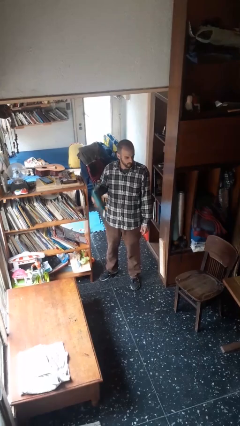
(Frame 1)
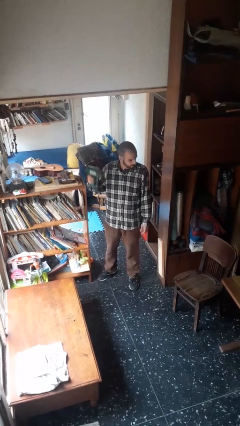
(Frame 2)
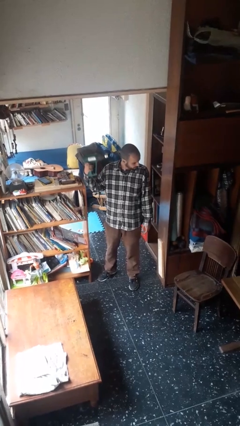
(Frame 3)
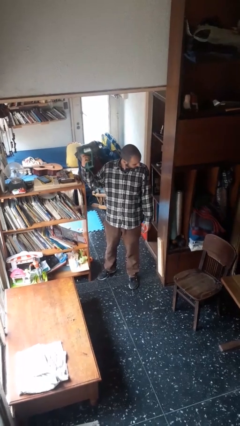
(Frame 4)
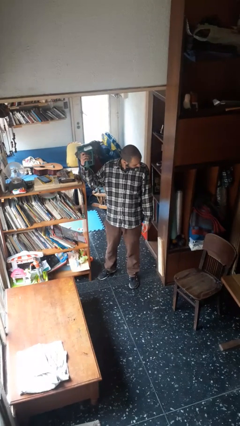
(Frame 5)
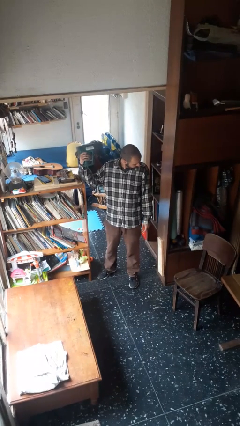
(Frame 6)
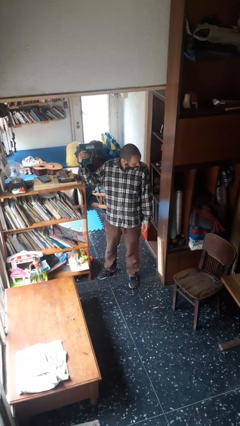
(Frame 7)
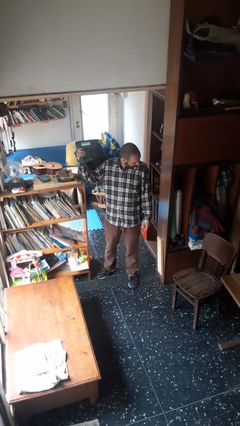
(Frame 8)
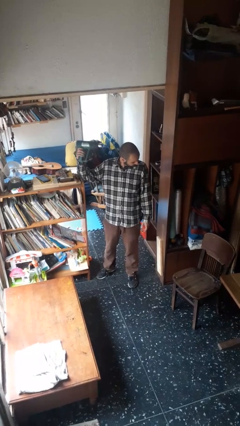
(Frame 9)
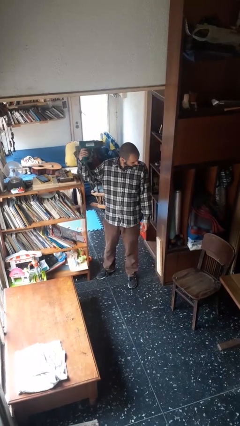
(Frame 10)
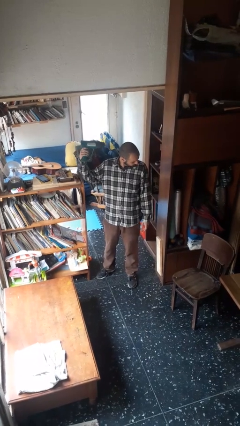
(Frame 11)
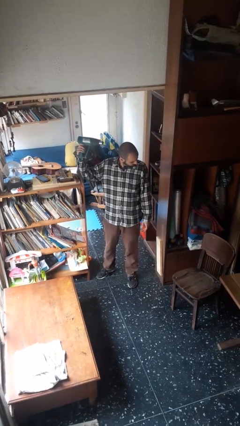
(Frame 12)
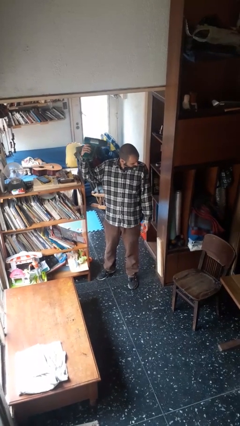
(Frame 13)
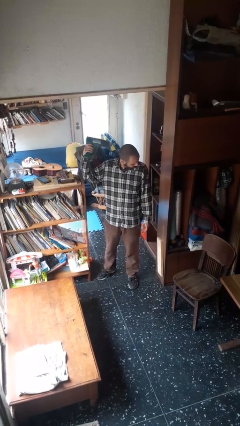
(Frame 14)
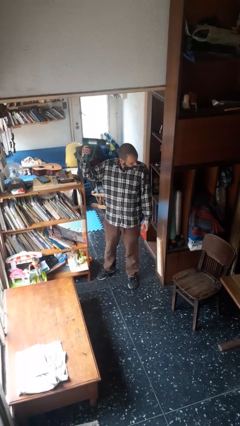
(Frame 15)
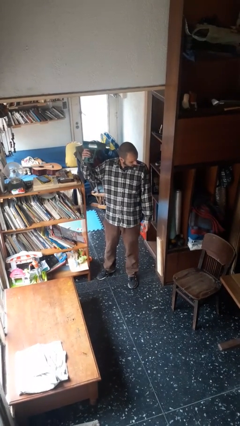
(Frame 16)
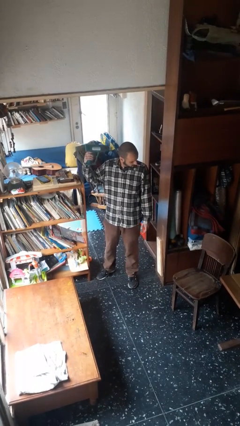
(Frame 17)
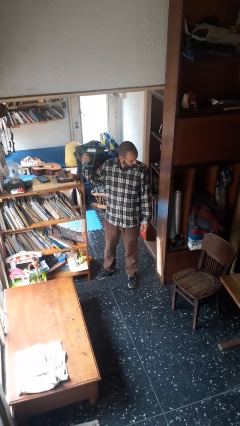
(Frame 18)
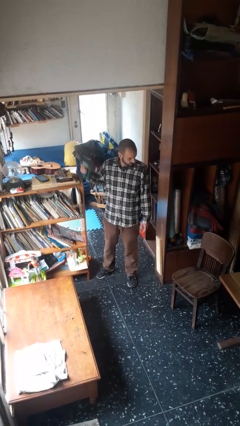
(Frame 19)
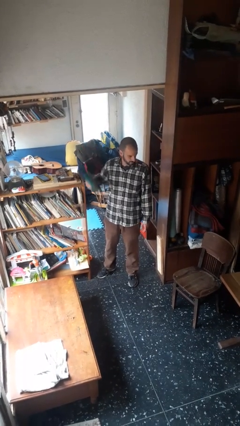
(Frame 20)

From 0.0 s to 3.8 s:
person dries hair with hairdryer

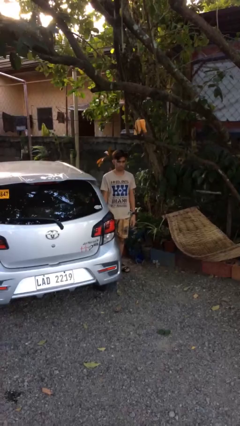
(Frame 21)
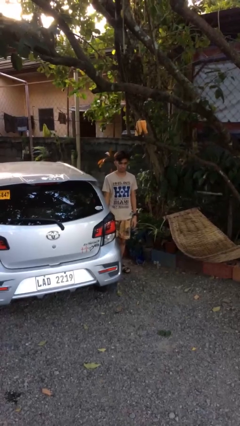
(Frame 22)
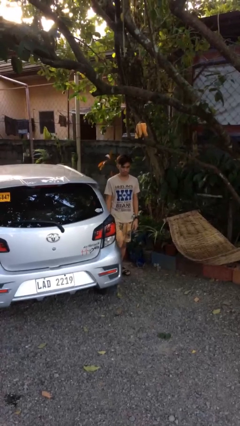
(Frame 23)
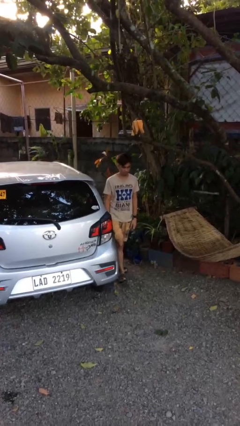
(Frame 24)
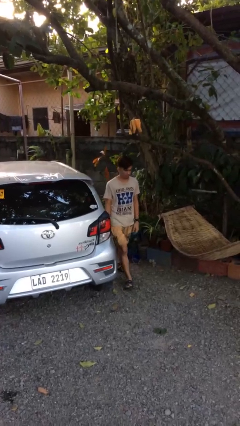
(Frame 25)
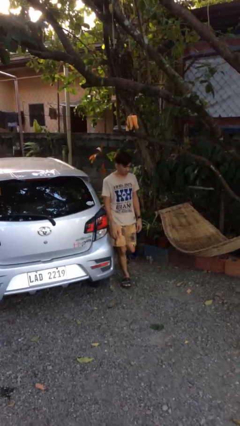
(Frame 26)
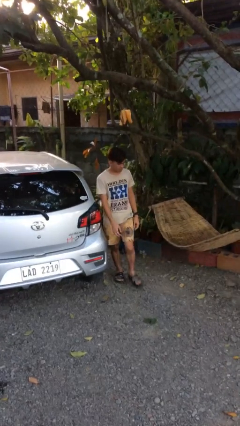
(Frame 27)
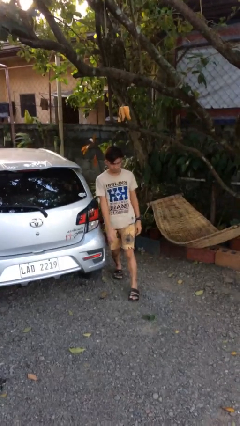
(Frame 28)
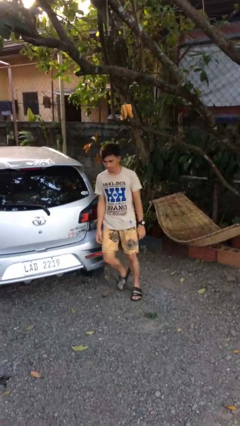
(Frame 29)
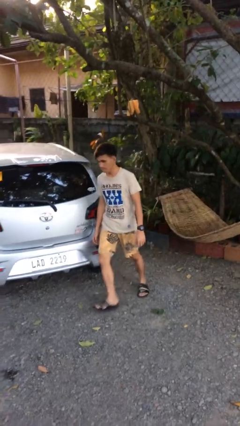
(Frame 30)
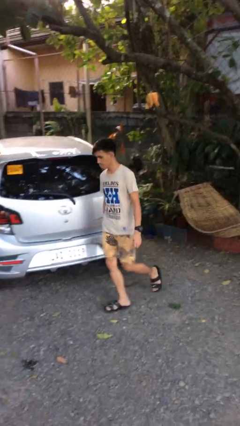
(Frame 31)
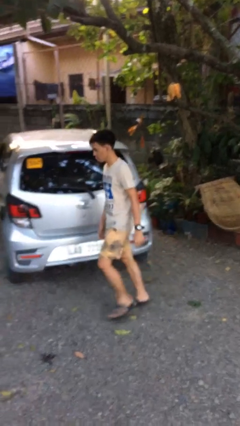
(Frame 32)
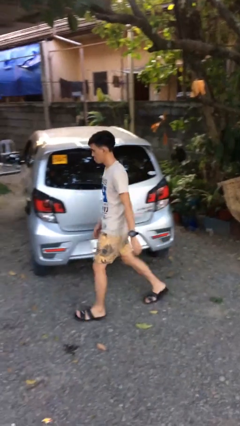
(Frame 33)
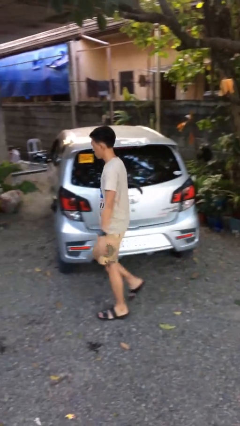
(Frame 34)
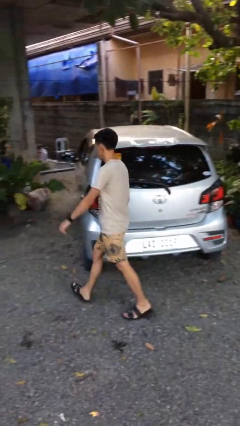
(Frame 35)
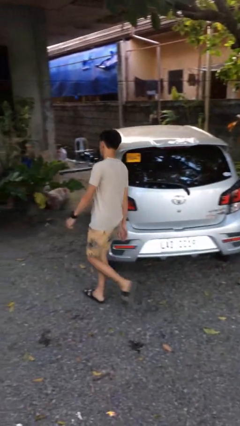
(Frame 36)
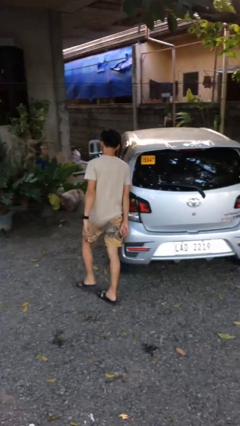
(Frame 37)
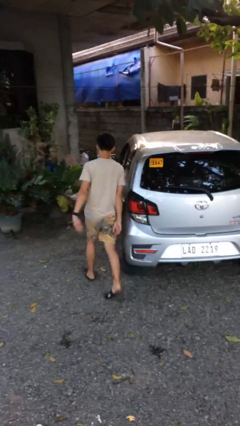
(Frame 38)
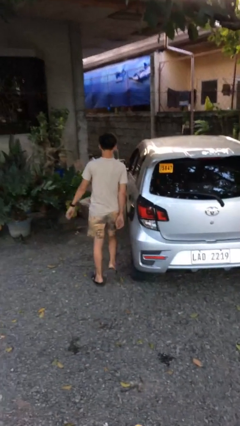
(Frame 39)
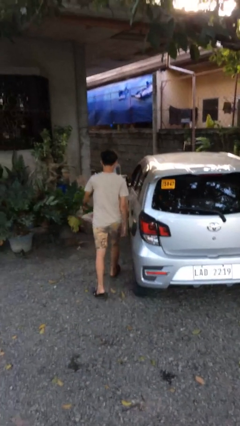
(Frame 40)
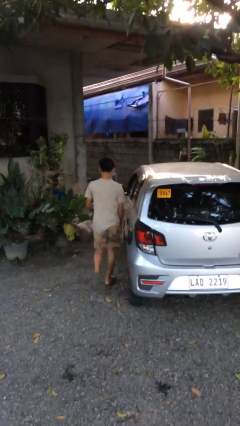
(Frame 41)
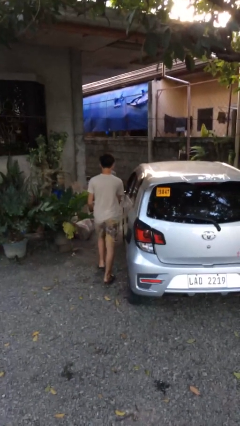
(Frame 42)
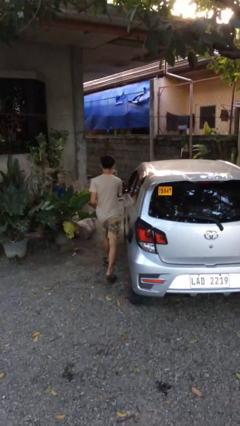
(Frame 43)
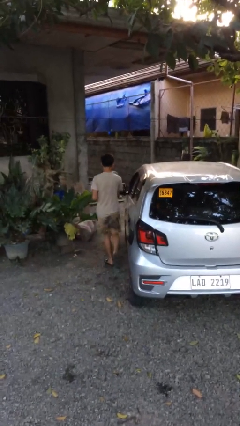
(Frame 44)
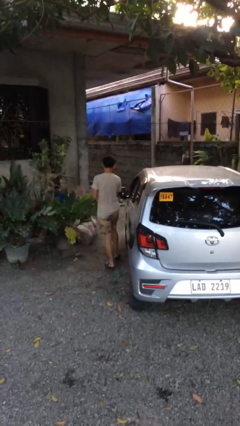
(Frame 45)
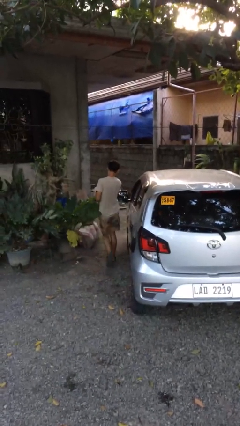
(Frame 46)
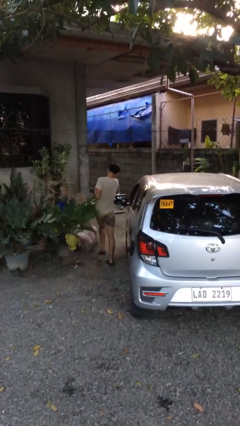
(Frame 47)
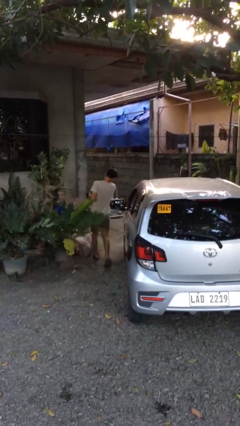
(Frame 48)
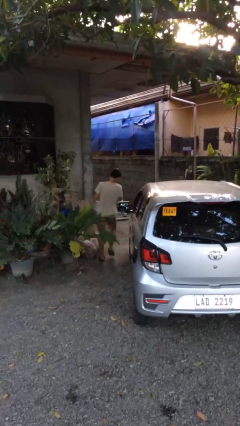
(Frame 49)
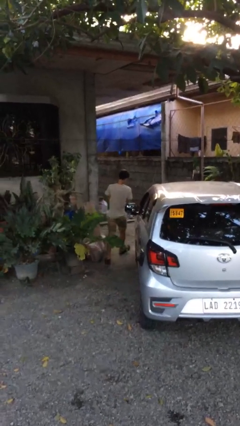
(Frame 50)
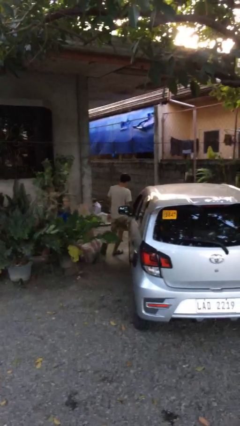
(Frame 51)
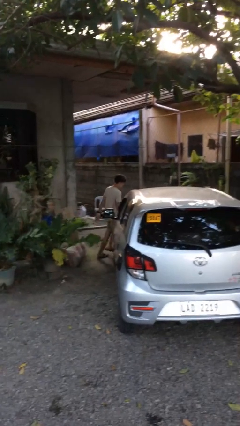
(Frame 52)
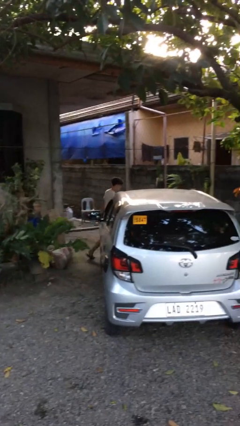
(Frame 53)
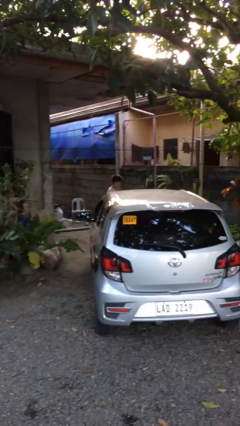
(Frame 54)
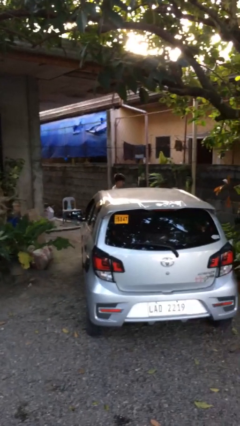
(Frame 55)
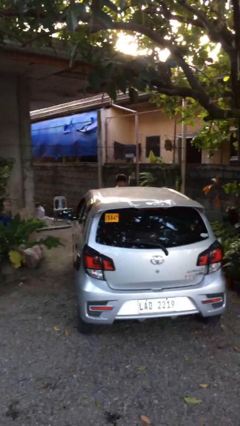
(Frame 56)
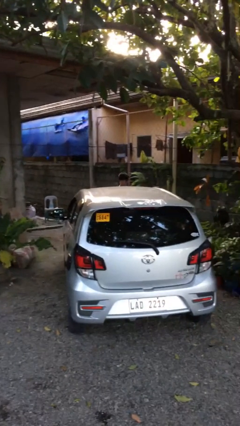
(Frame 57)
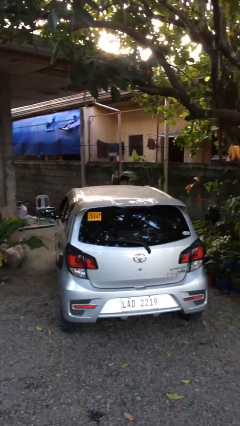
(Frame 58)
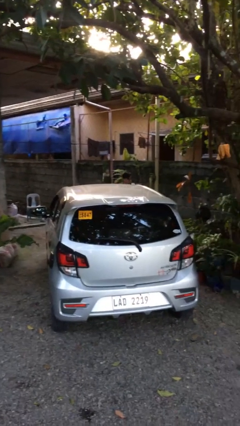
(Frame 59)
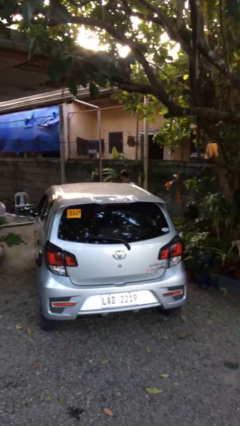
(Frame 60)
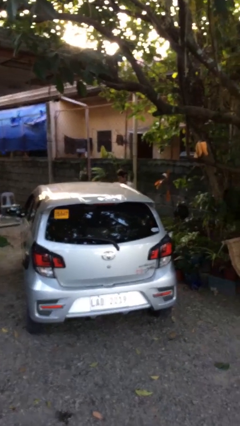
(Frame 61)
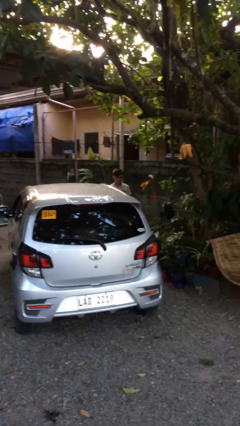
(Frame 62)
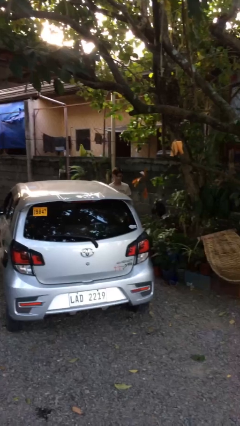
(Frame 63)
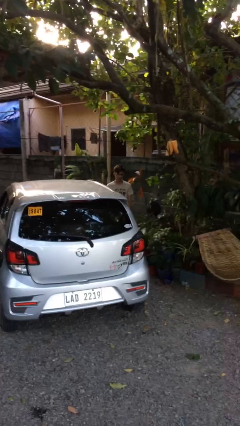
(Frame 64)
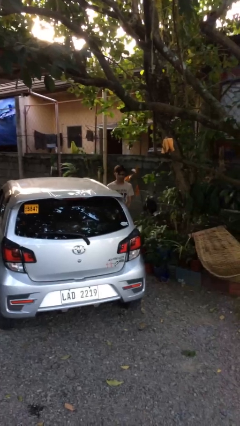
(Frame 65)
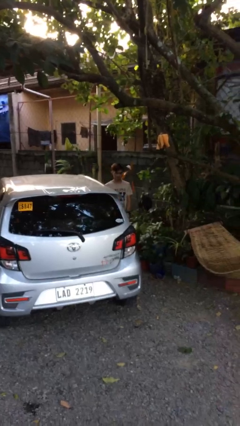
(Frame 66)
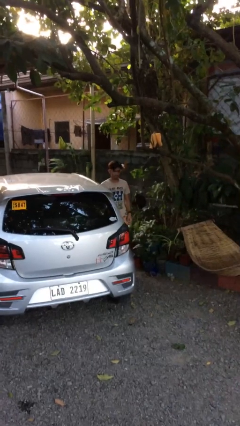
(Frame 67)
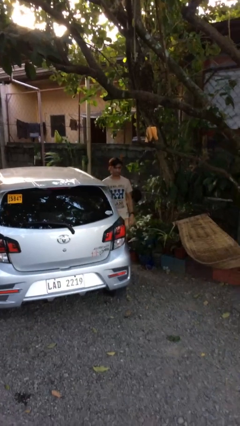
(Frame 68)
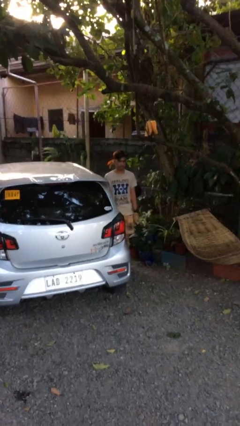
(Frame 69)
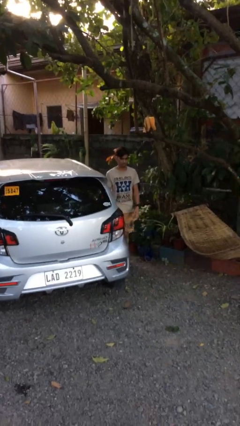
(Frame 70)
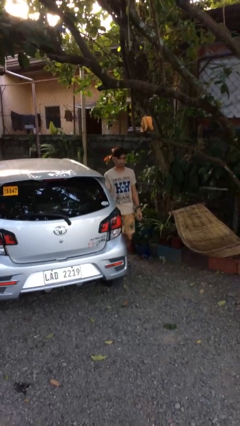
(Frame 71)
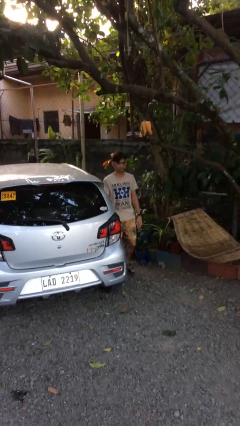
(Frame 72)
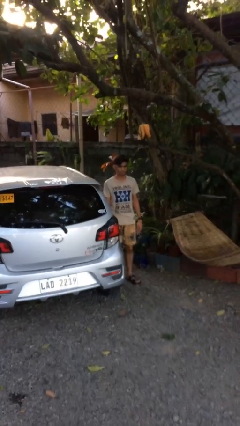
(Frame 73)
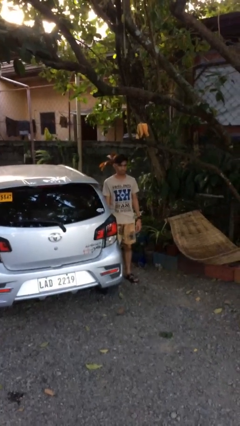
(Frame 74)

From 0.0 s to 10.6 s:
person walks around car

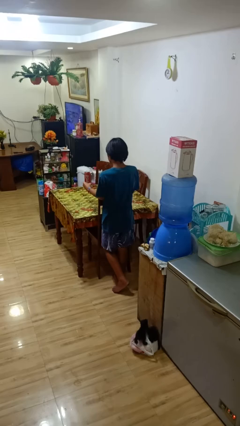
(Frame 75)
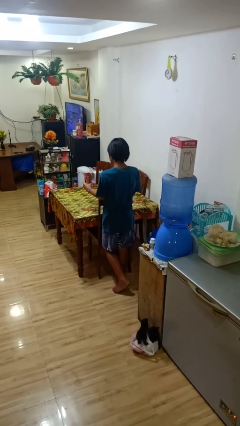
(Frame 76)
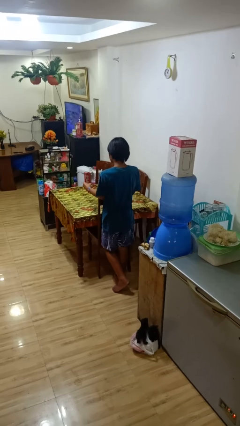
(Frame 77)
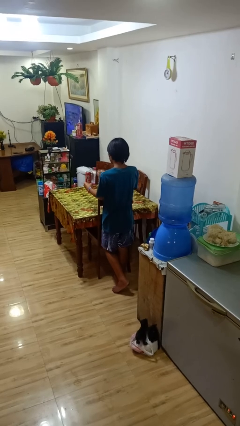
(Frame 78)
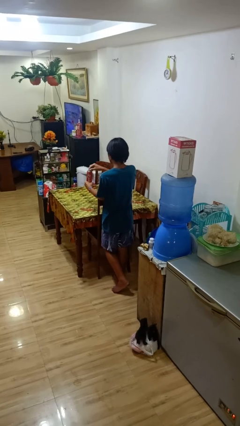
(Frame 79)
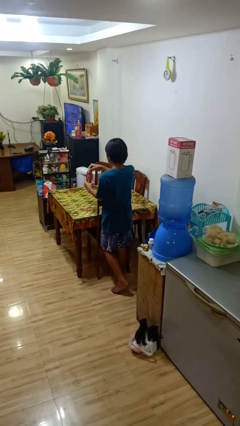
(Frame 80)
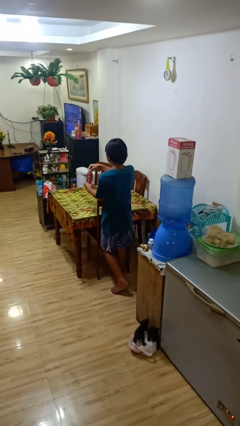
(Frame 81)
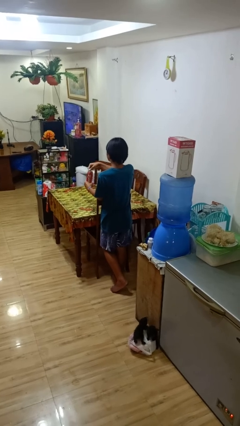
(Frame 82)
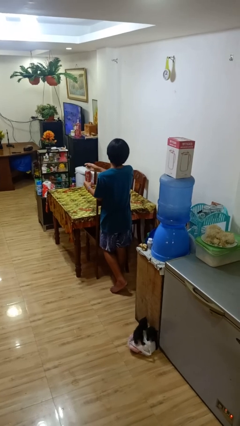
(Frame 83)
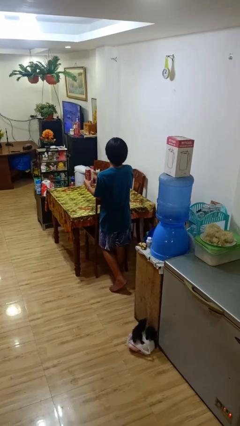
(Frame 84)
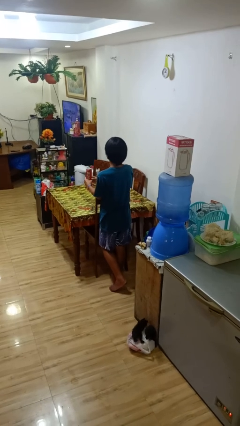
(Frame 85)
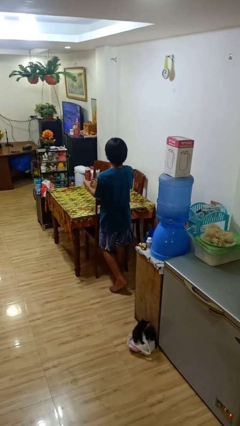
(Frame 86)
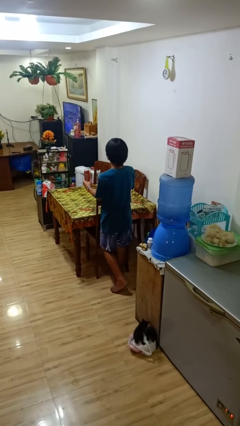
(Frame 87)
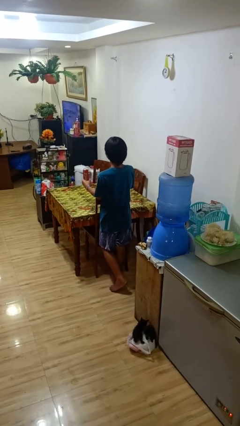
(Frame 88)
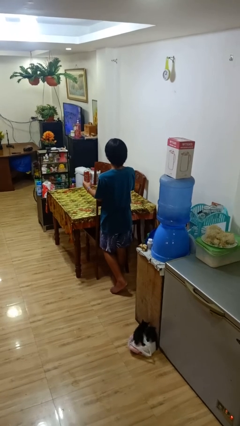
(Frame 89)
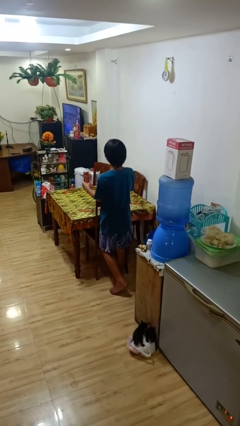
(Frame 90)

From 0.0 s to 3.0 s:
person opens beverage can

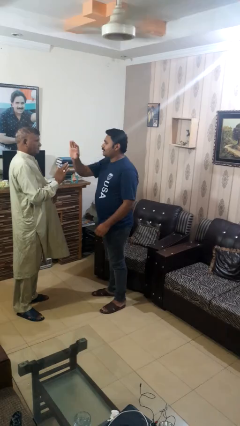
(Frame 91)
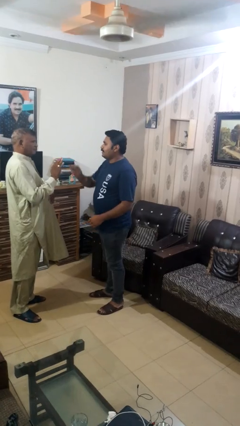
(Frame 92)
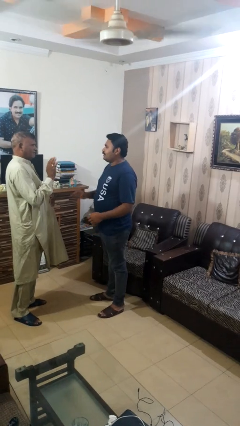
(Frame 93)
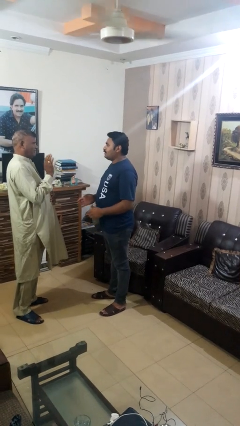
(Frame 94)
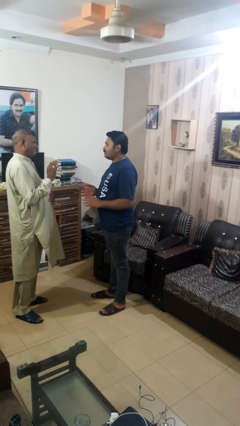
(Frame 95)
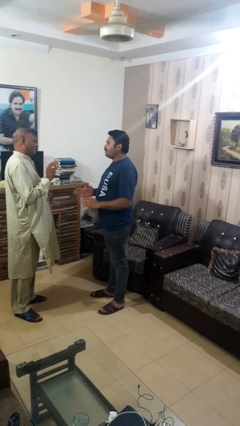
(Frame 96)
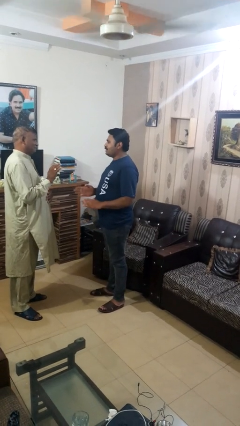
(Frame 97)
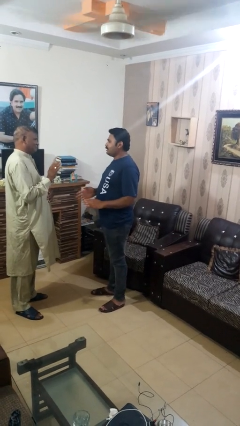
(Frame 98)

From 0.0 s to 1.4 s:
person highfives hand
